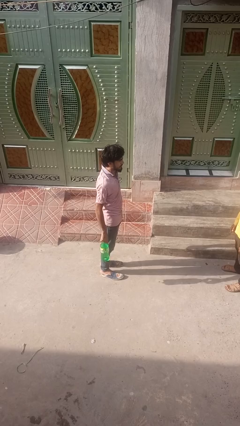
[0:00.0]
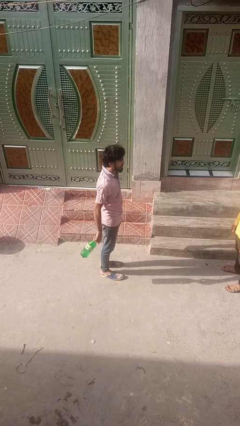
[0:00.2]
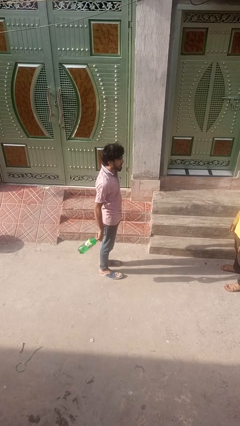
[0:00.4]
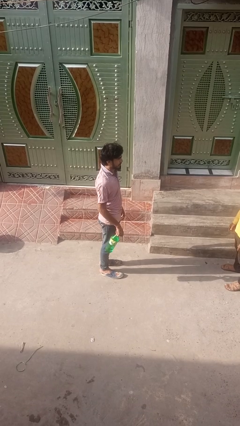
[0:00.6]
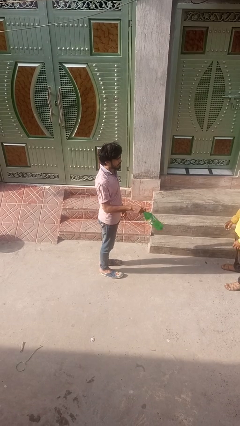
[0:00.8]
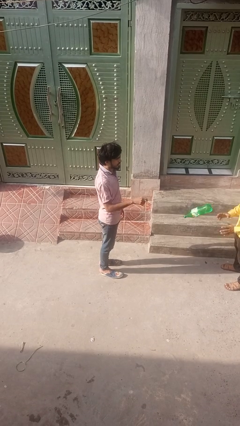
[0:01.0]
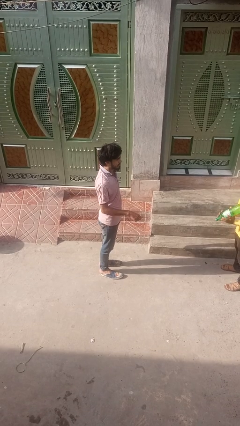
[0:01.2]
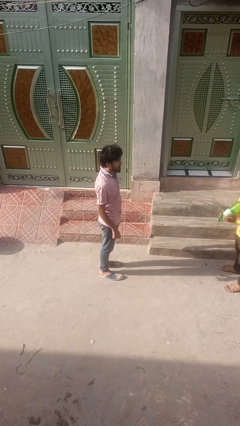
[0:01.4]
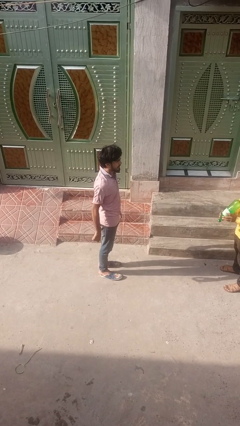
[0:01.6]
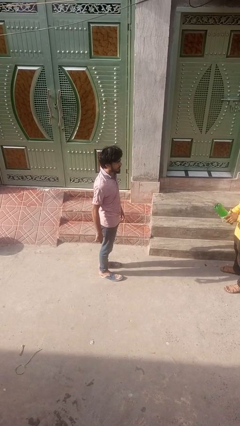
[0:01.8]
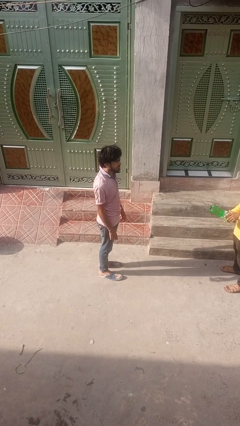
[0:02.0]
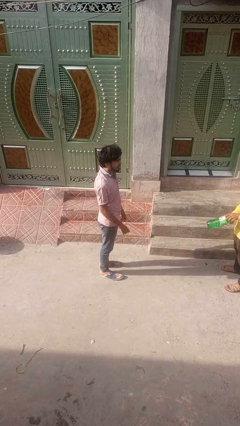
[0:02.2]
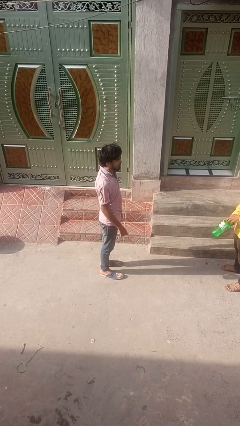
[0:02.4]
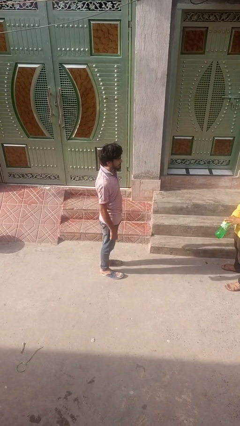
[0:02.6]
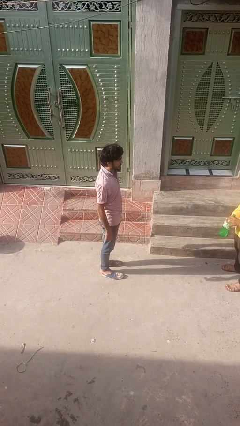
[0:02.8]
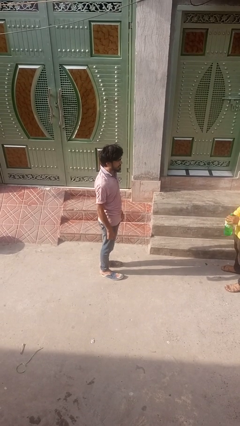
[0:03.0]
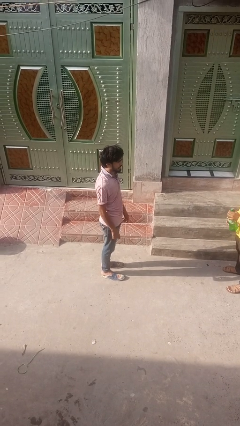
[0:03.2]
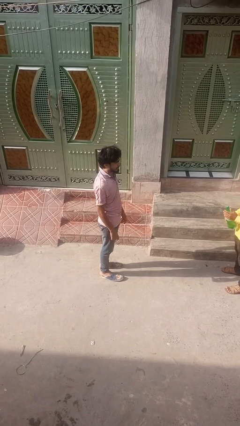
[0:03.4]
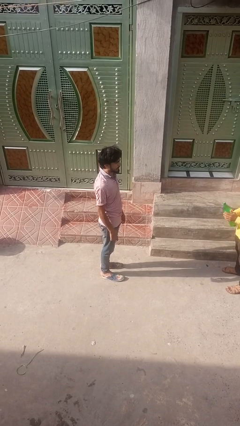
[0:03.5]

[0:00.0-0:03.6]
person throws object to person

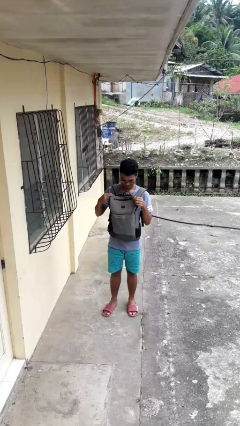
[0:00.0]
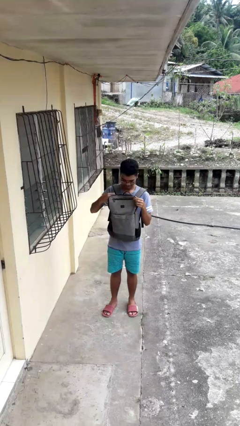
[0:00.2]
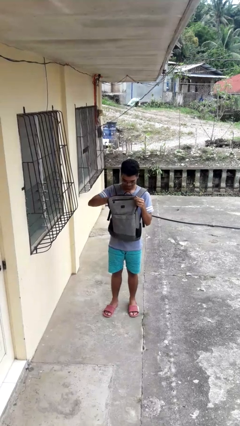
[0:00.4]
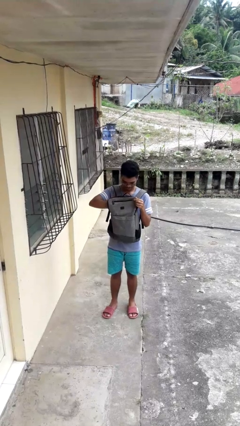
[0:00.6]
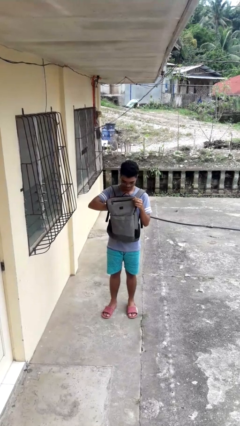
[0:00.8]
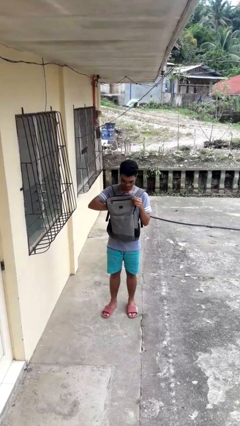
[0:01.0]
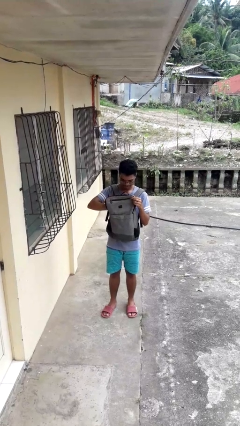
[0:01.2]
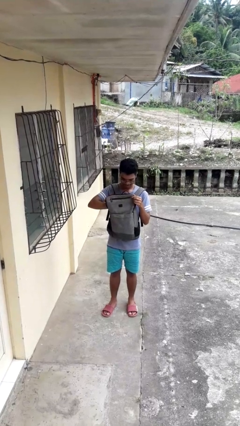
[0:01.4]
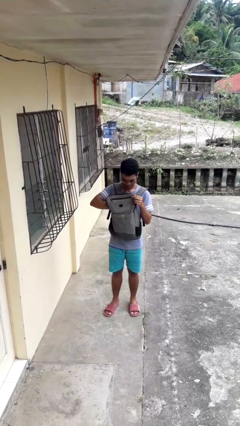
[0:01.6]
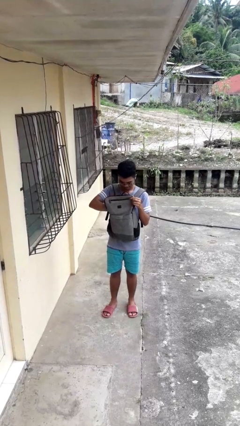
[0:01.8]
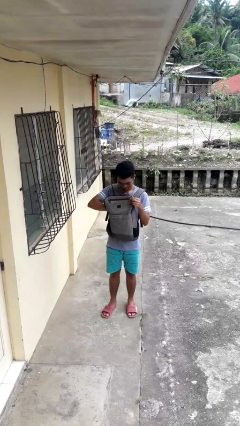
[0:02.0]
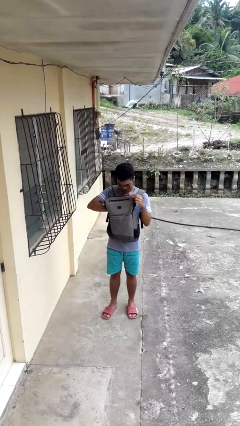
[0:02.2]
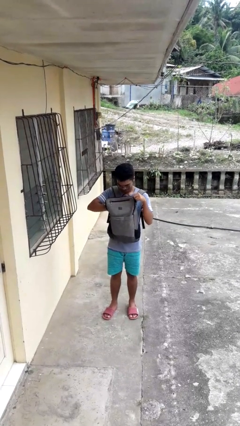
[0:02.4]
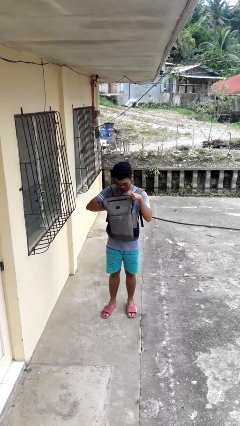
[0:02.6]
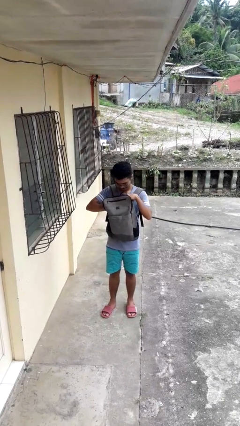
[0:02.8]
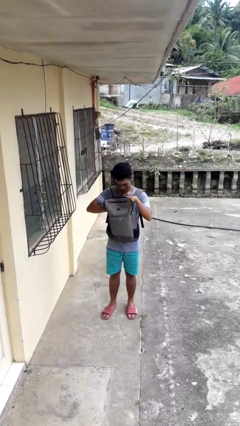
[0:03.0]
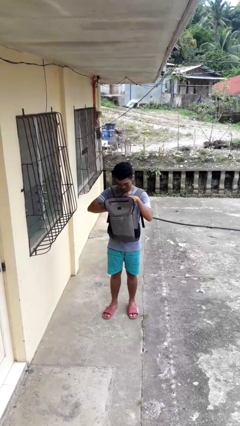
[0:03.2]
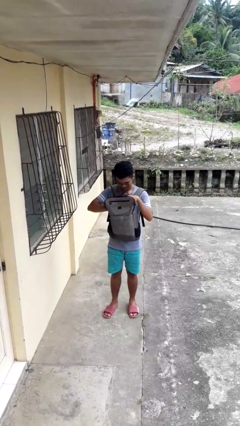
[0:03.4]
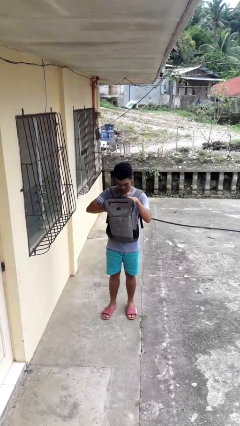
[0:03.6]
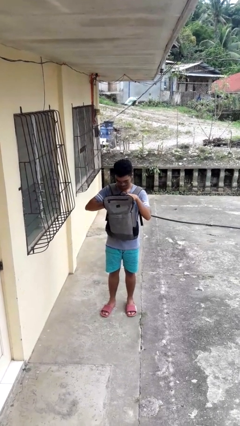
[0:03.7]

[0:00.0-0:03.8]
person searches in backpack

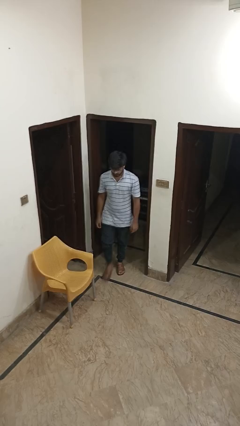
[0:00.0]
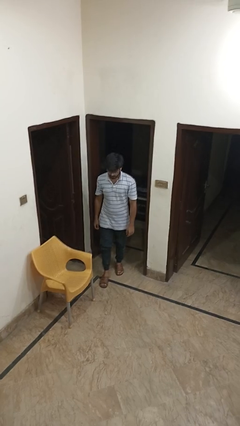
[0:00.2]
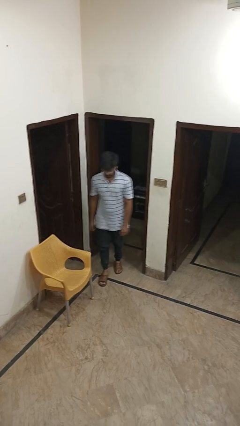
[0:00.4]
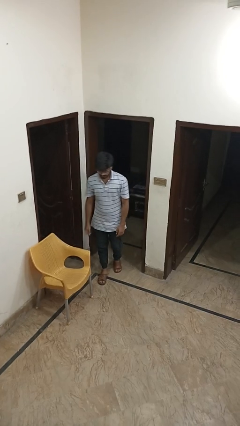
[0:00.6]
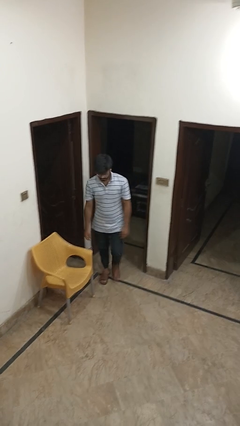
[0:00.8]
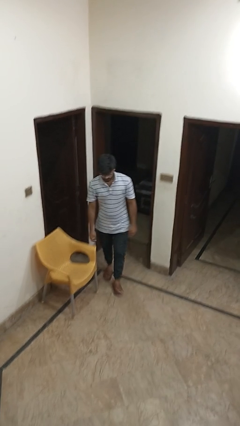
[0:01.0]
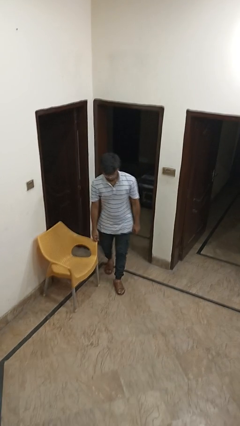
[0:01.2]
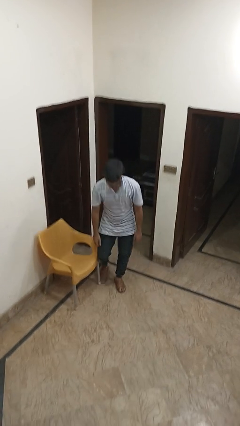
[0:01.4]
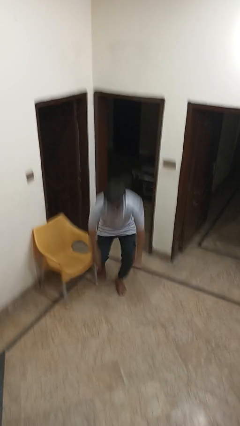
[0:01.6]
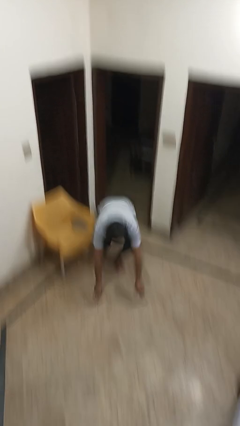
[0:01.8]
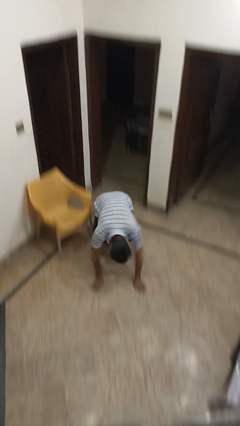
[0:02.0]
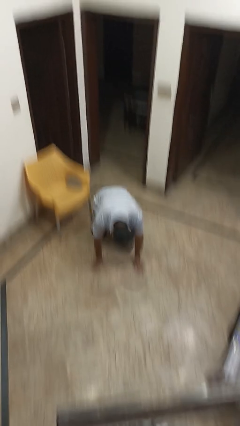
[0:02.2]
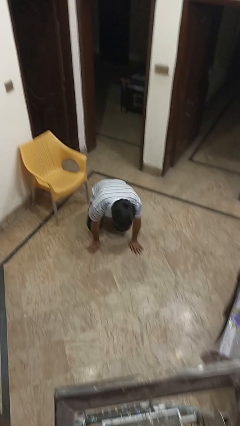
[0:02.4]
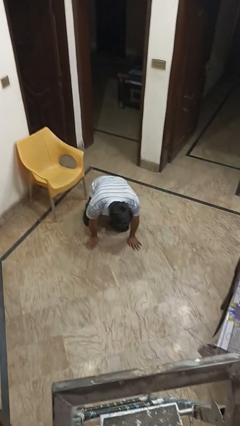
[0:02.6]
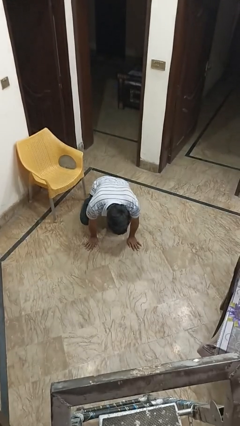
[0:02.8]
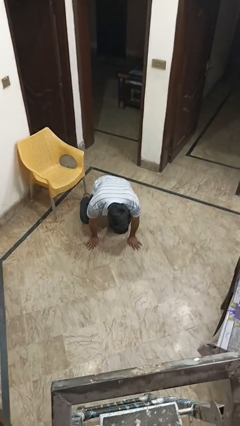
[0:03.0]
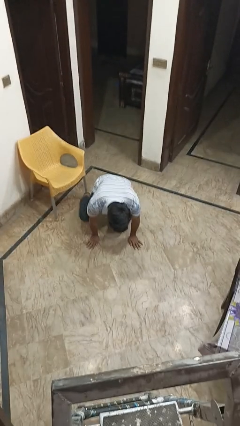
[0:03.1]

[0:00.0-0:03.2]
person trips on object on floor

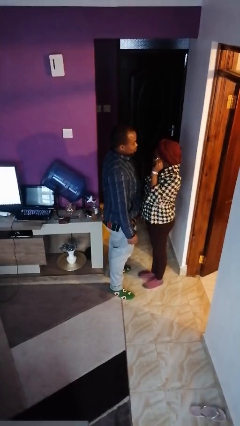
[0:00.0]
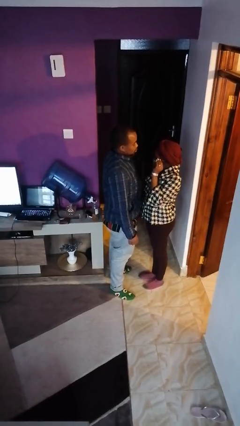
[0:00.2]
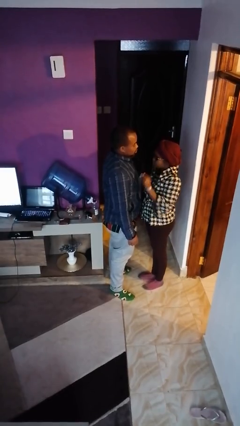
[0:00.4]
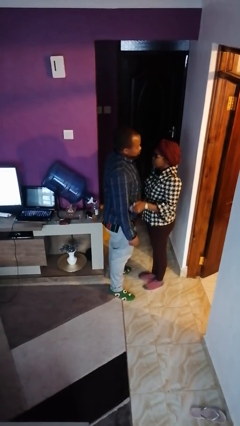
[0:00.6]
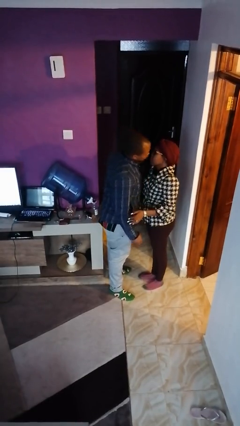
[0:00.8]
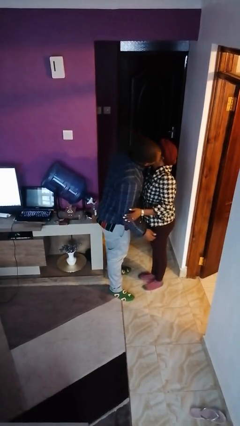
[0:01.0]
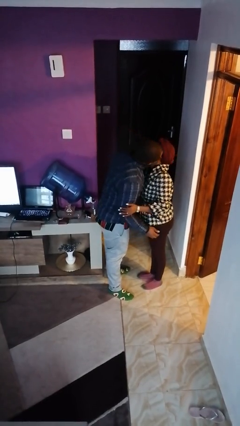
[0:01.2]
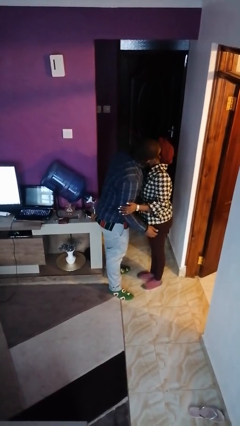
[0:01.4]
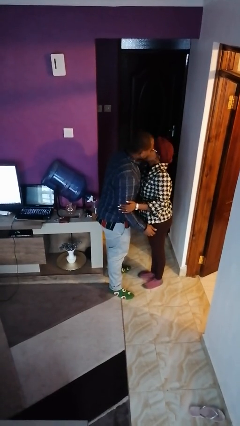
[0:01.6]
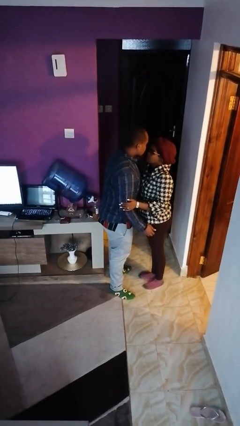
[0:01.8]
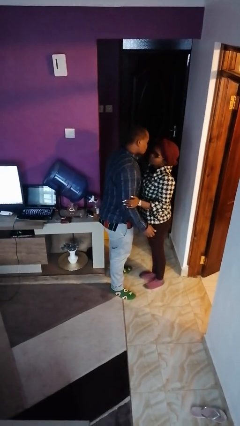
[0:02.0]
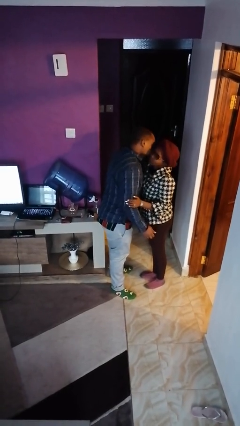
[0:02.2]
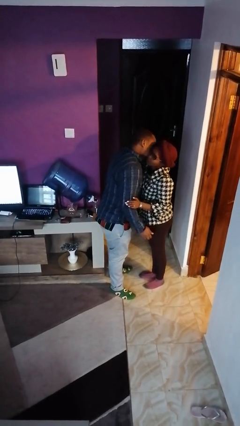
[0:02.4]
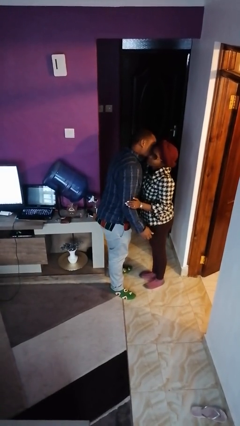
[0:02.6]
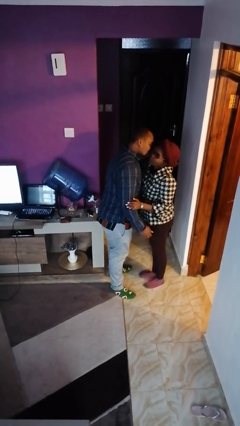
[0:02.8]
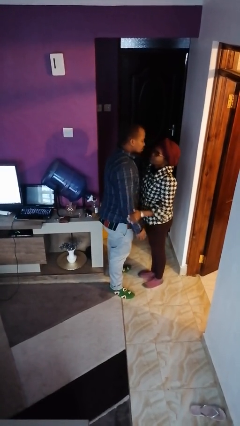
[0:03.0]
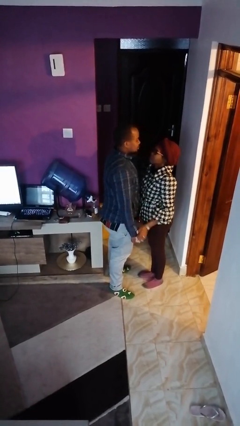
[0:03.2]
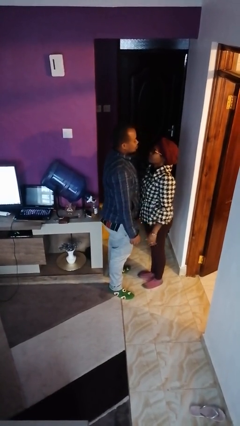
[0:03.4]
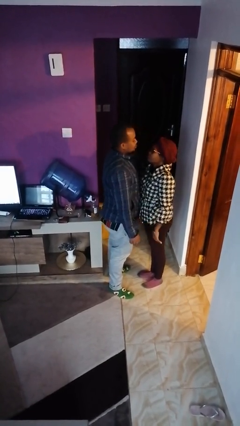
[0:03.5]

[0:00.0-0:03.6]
person kisses cheek of person

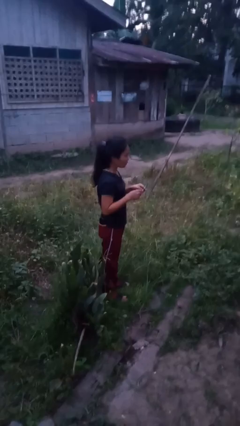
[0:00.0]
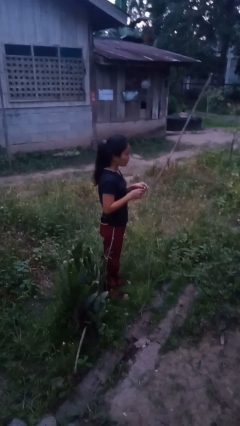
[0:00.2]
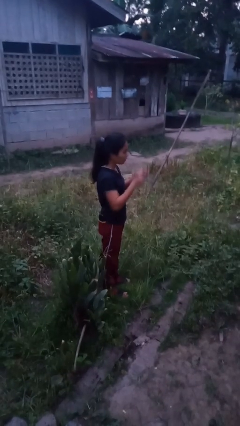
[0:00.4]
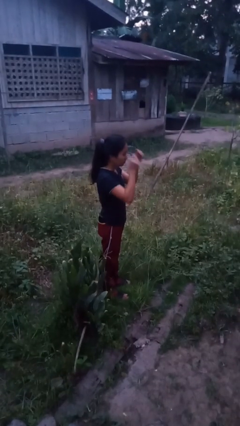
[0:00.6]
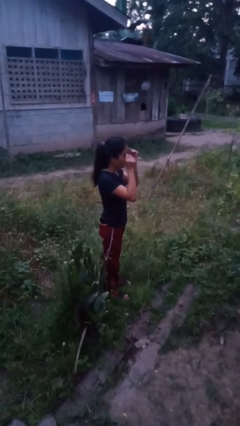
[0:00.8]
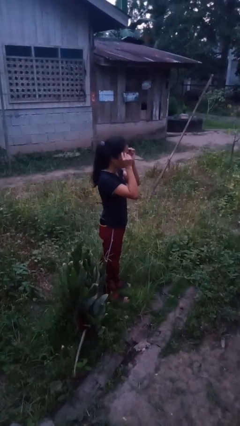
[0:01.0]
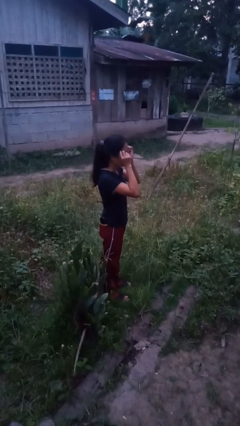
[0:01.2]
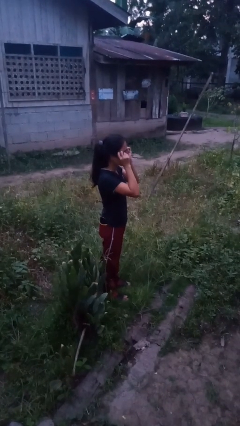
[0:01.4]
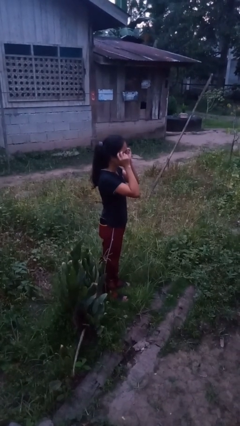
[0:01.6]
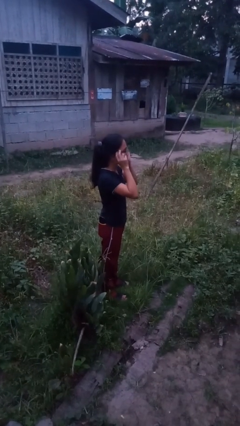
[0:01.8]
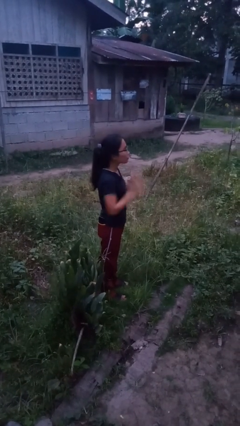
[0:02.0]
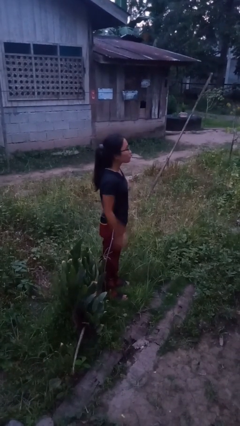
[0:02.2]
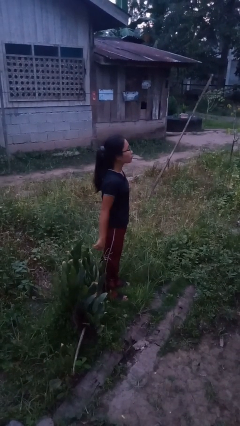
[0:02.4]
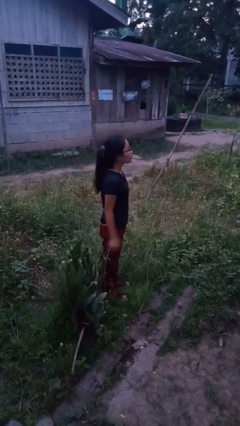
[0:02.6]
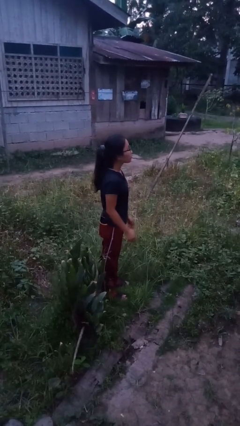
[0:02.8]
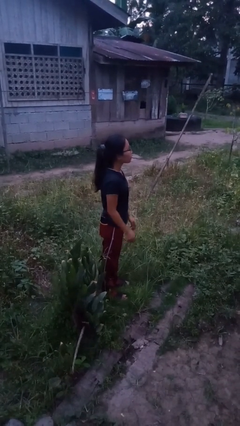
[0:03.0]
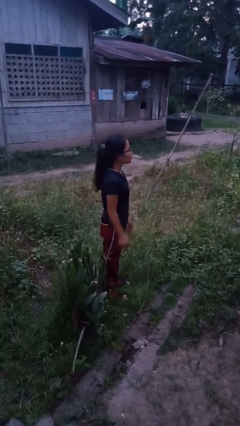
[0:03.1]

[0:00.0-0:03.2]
person puts on glasses

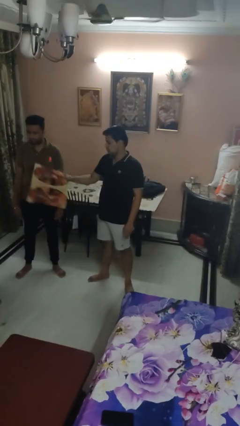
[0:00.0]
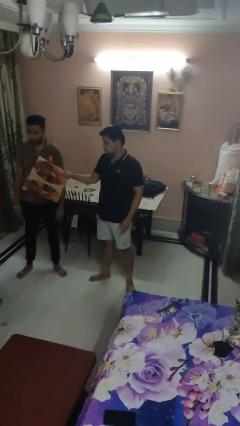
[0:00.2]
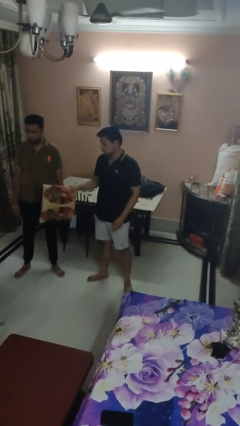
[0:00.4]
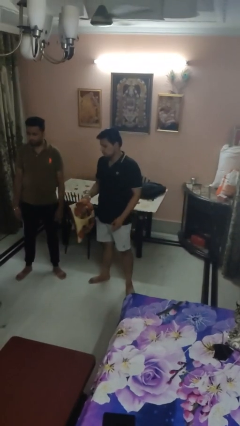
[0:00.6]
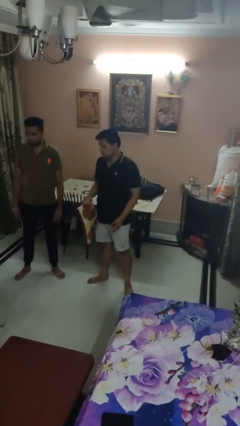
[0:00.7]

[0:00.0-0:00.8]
person hits person with pillow
